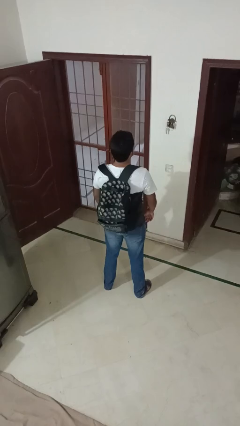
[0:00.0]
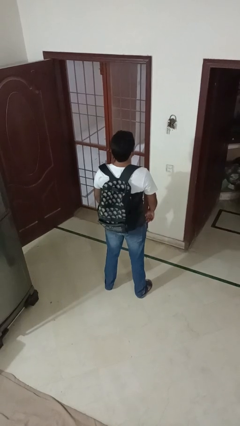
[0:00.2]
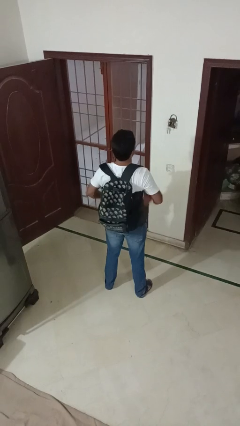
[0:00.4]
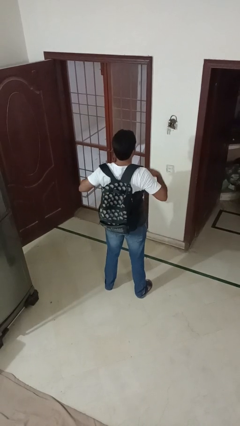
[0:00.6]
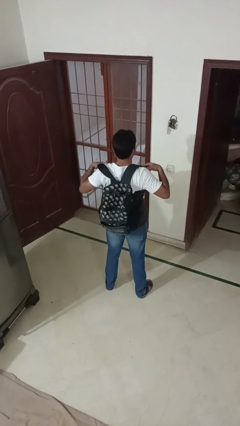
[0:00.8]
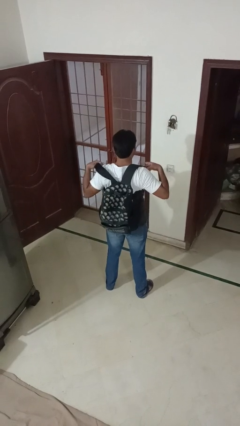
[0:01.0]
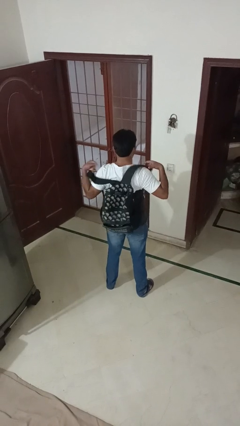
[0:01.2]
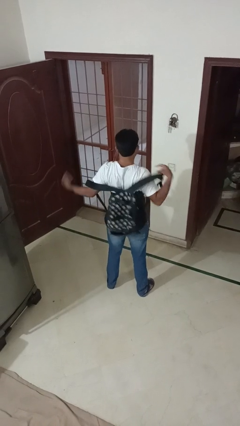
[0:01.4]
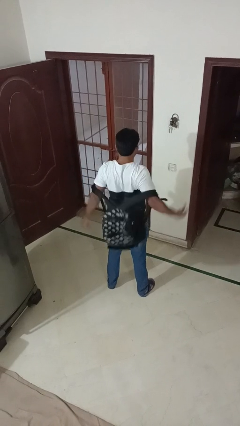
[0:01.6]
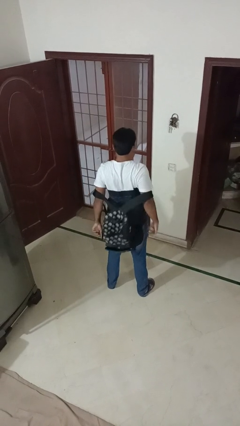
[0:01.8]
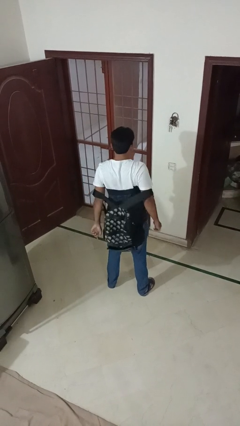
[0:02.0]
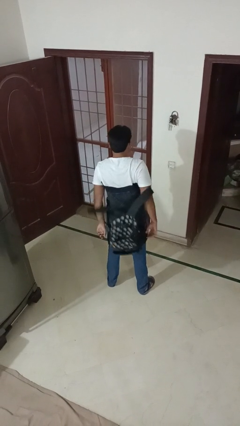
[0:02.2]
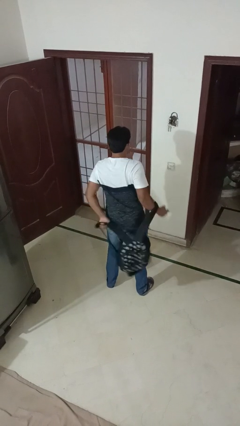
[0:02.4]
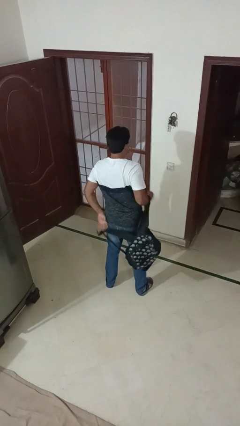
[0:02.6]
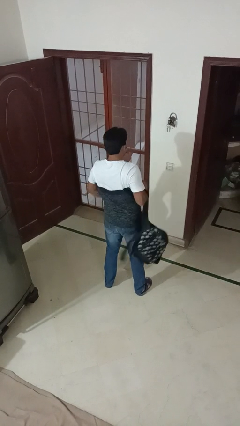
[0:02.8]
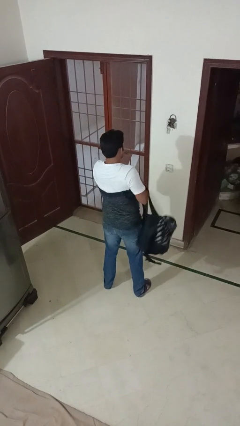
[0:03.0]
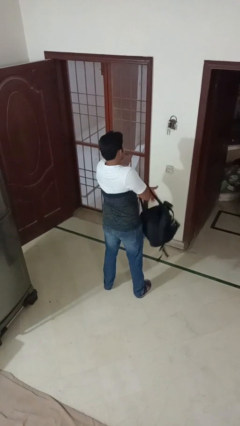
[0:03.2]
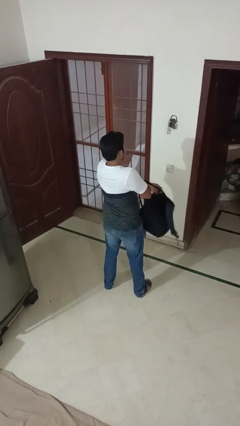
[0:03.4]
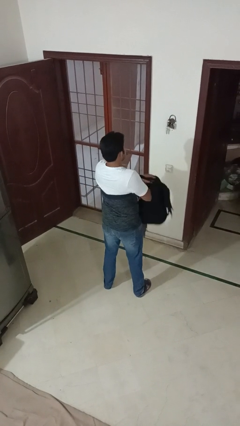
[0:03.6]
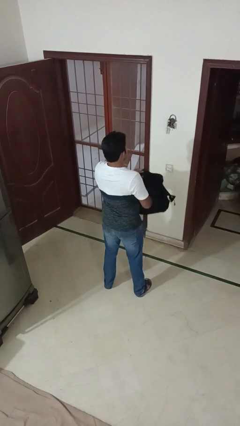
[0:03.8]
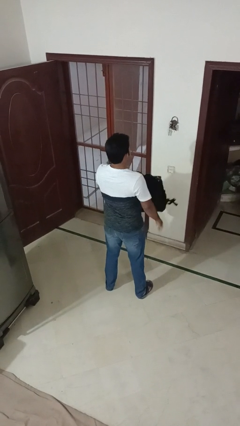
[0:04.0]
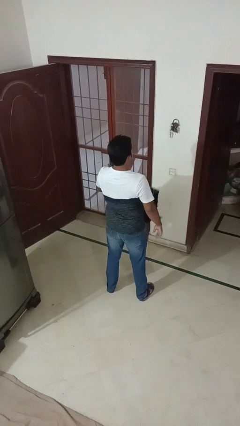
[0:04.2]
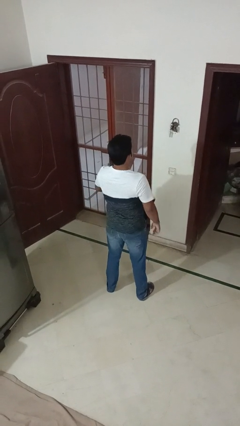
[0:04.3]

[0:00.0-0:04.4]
person takes off backpack

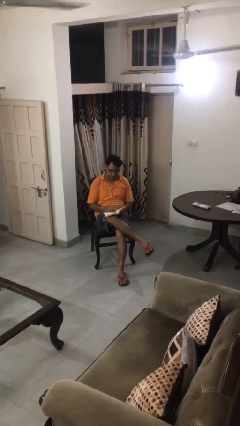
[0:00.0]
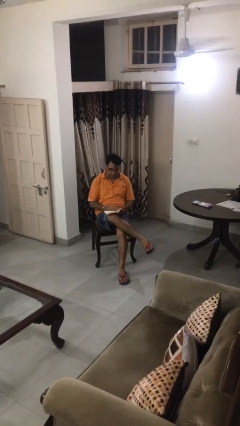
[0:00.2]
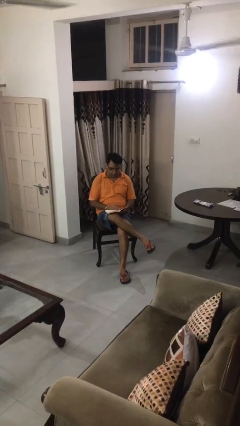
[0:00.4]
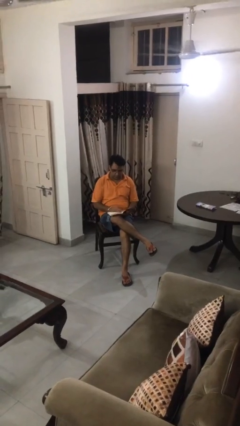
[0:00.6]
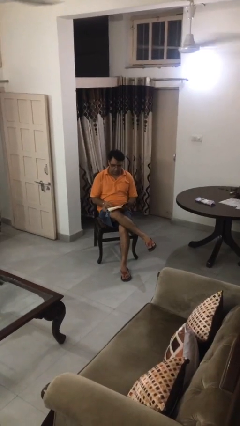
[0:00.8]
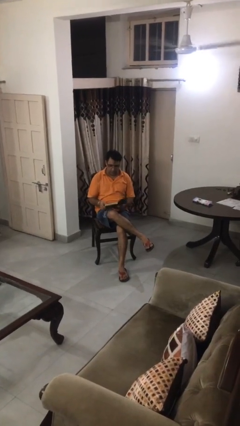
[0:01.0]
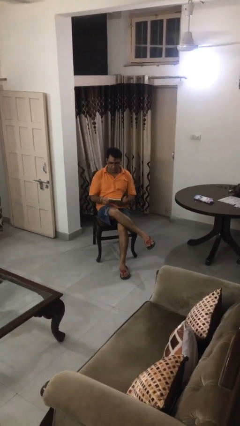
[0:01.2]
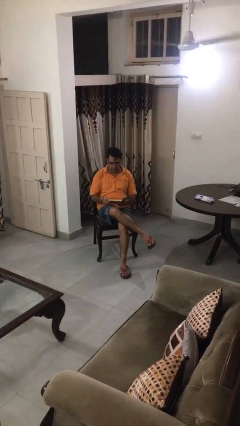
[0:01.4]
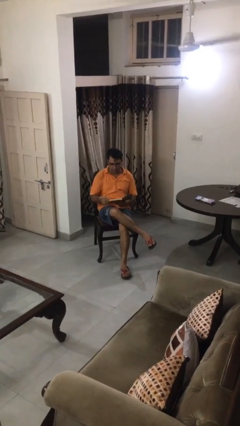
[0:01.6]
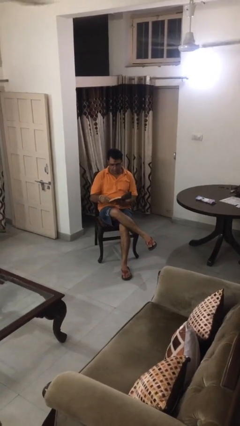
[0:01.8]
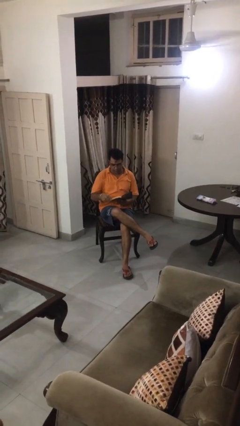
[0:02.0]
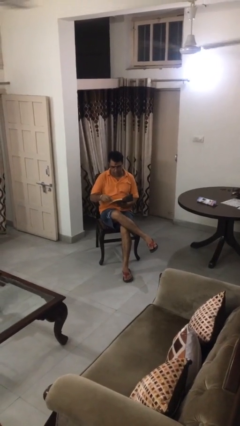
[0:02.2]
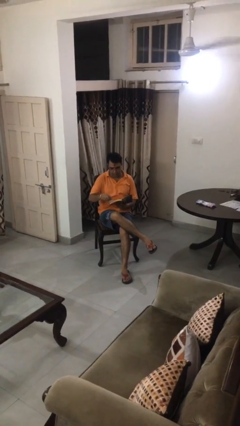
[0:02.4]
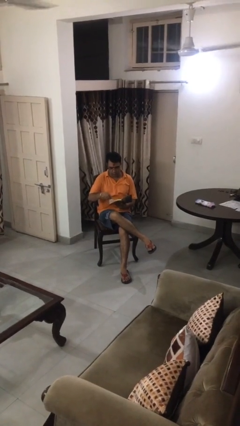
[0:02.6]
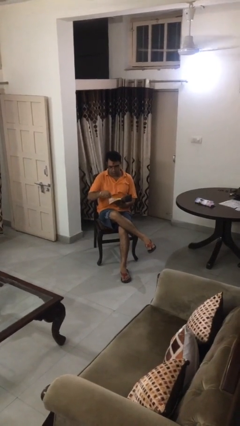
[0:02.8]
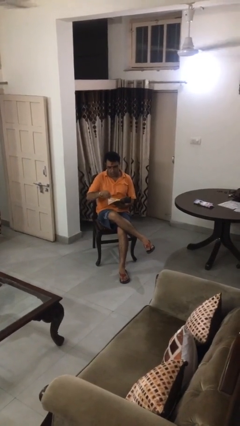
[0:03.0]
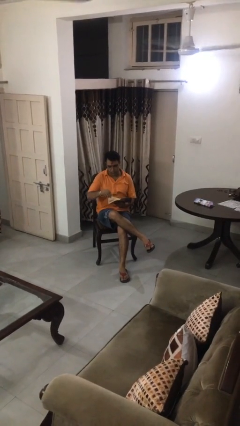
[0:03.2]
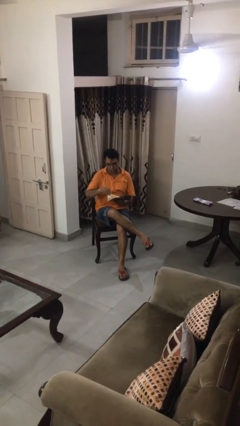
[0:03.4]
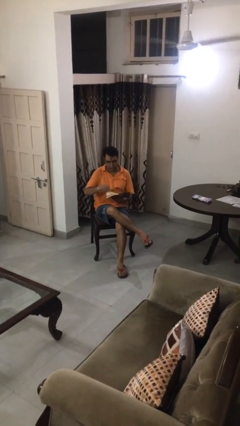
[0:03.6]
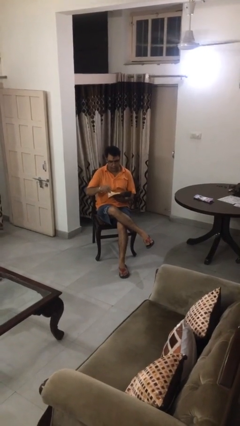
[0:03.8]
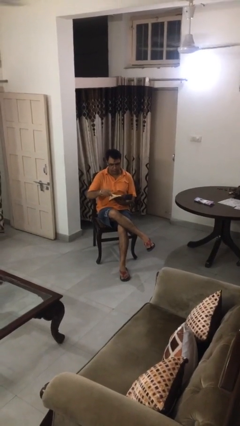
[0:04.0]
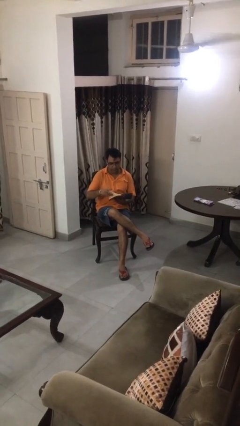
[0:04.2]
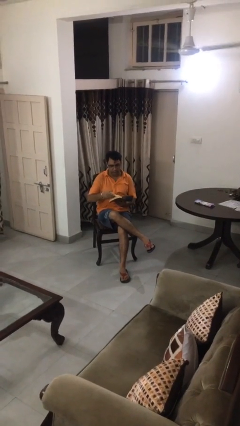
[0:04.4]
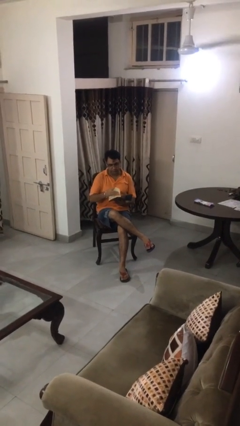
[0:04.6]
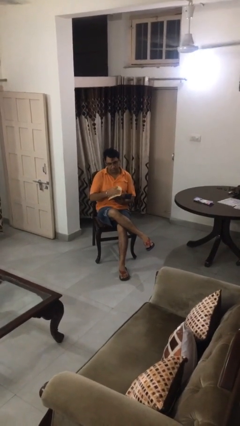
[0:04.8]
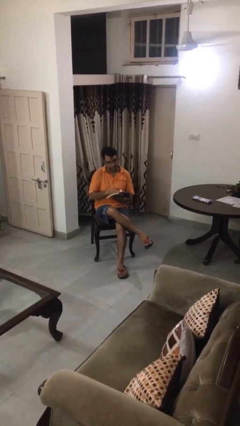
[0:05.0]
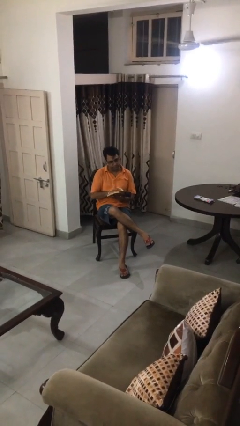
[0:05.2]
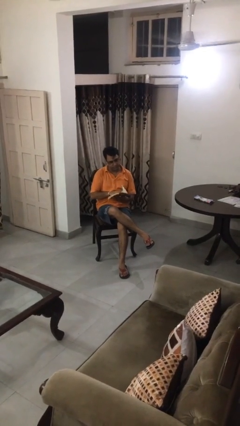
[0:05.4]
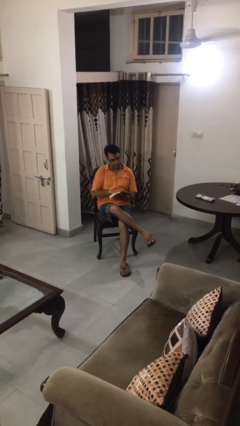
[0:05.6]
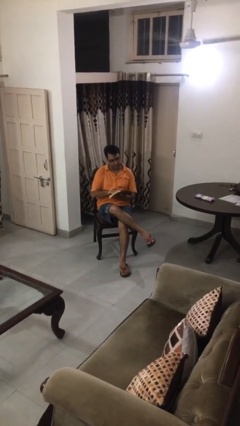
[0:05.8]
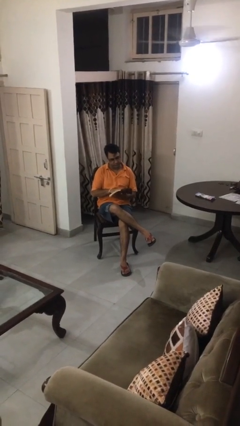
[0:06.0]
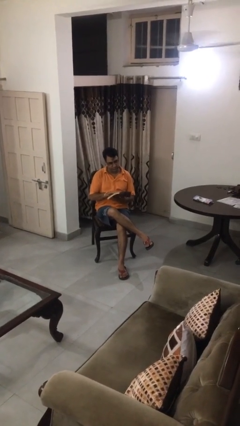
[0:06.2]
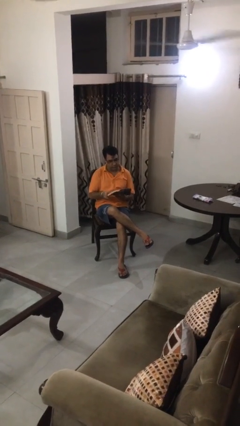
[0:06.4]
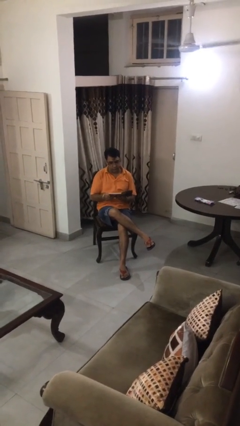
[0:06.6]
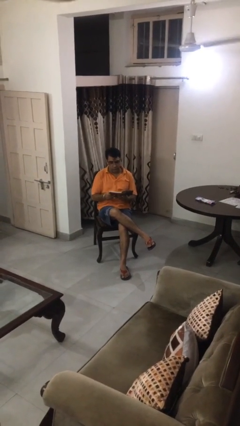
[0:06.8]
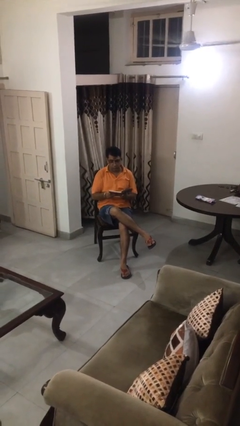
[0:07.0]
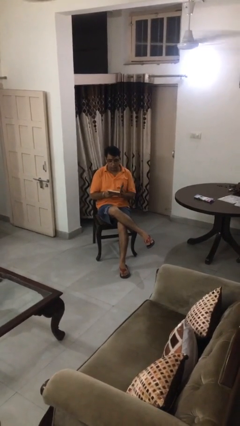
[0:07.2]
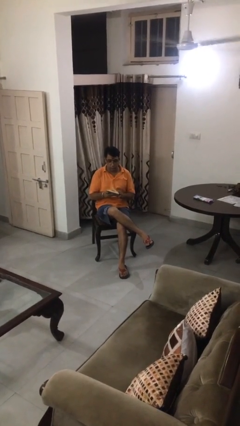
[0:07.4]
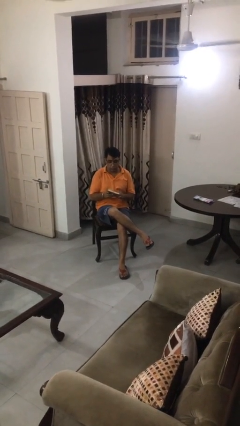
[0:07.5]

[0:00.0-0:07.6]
person reads book

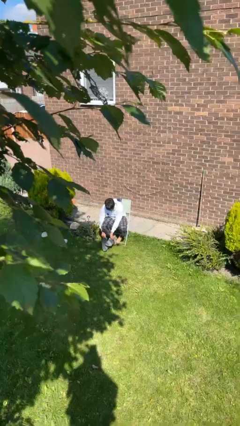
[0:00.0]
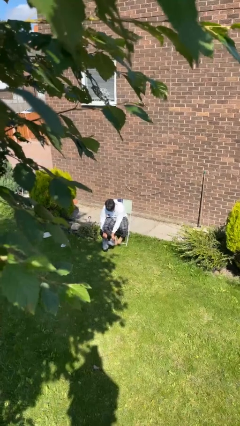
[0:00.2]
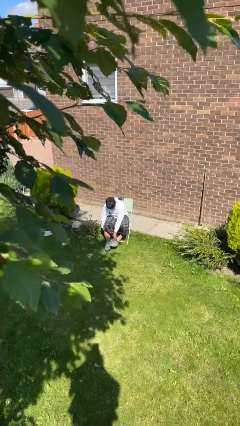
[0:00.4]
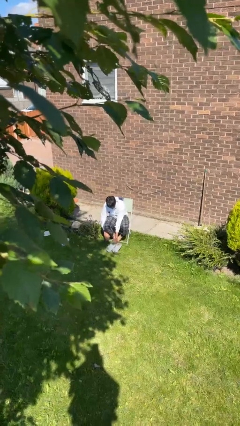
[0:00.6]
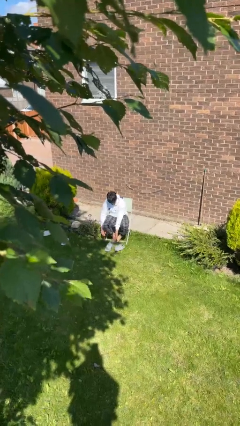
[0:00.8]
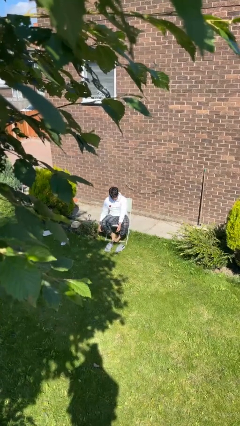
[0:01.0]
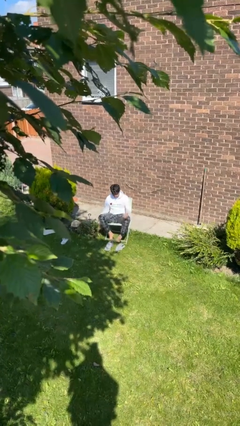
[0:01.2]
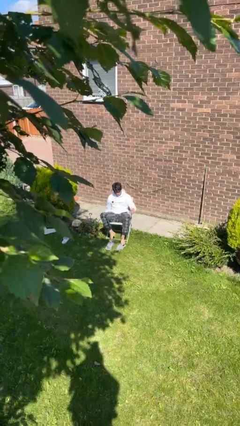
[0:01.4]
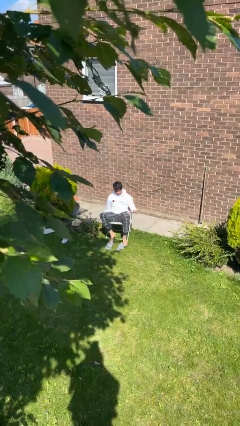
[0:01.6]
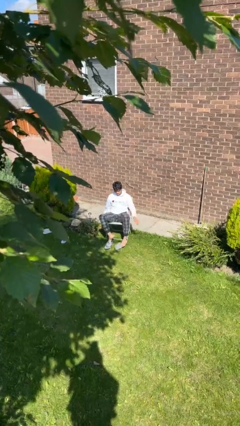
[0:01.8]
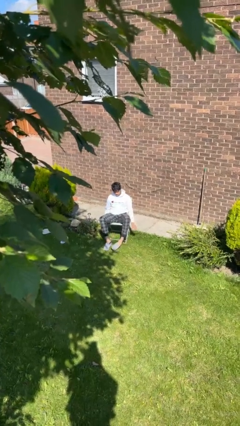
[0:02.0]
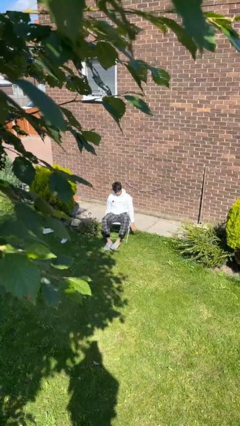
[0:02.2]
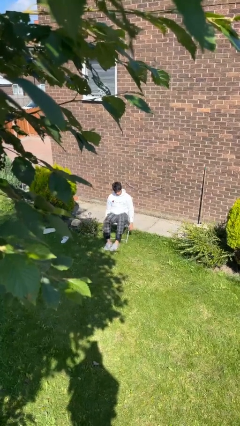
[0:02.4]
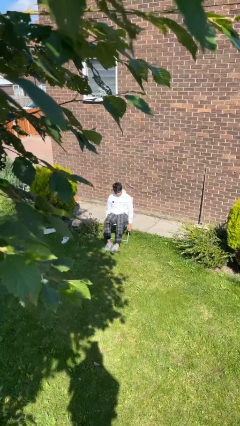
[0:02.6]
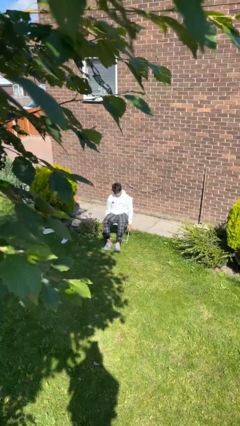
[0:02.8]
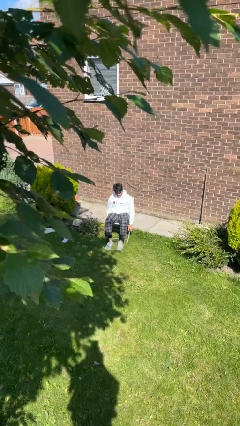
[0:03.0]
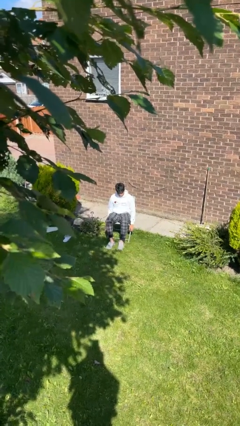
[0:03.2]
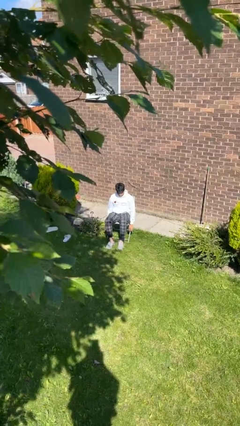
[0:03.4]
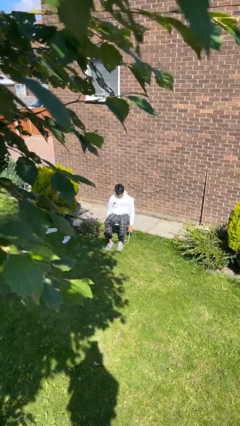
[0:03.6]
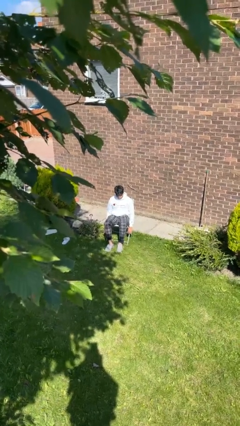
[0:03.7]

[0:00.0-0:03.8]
person puts on shoes

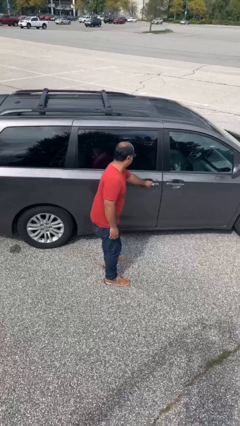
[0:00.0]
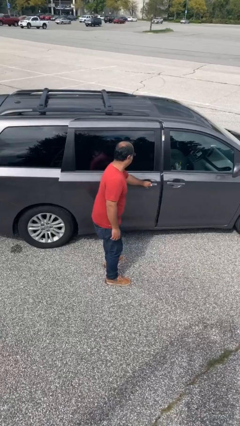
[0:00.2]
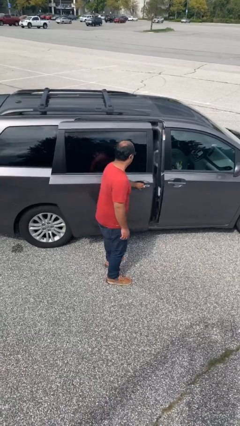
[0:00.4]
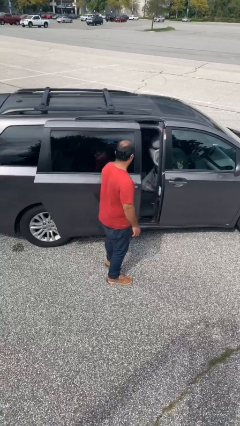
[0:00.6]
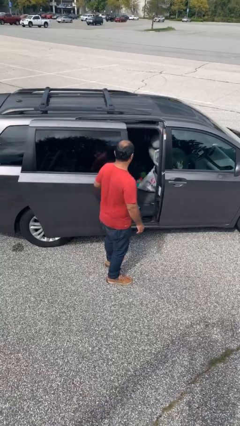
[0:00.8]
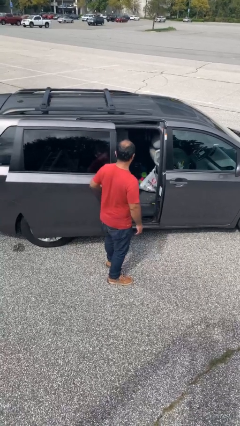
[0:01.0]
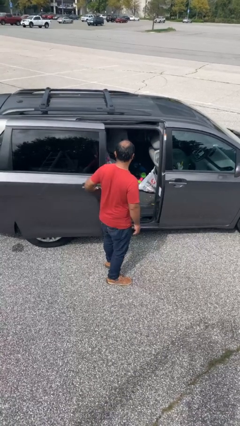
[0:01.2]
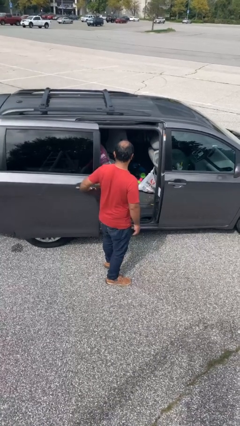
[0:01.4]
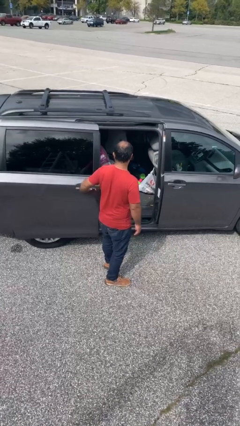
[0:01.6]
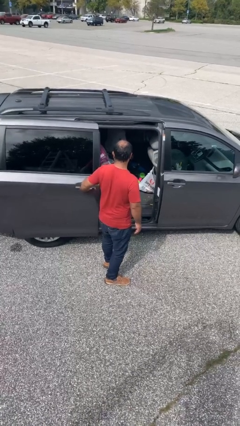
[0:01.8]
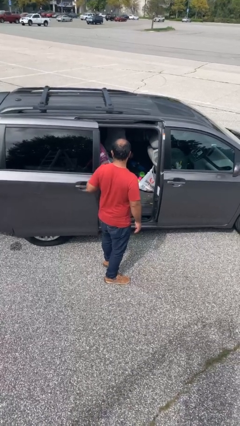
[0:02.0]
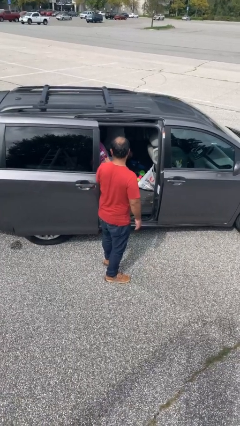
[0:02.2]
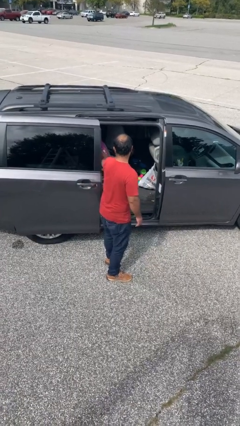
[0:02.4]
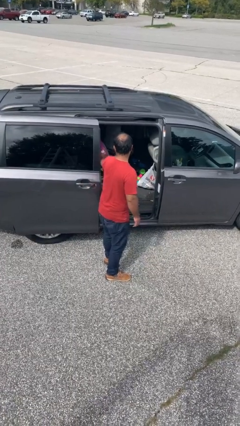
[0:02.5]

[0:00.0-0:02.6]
person opens car door
